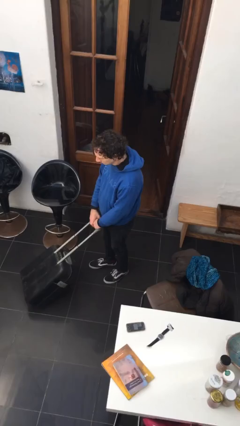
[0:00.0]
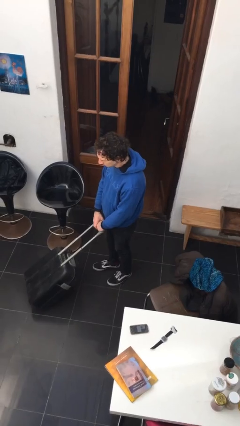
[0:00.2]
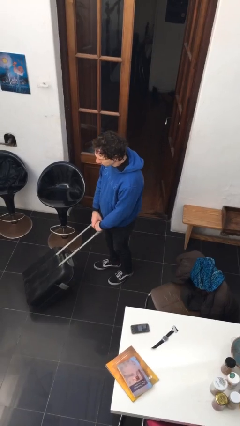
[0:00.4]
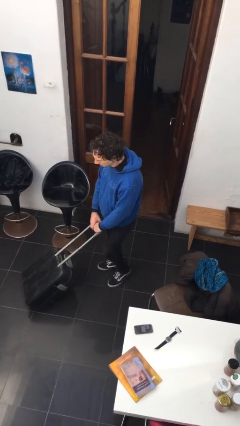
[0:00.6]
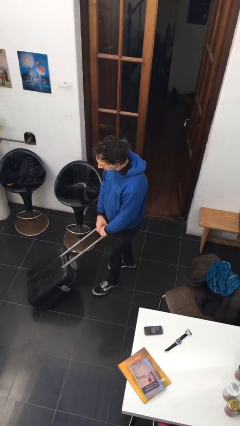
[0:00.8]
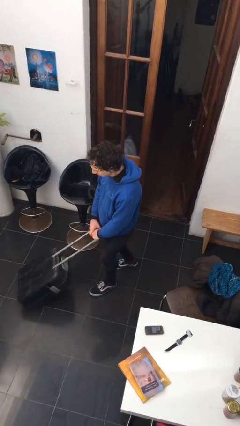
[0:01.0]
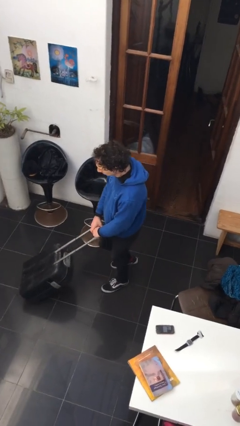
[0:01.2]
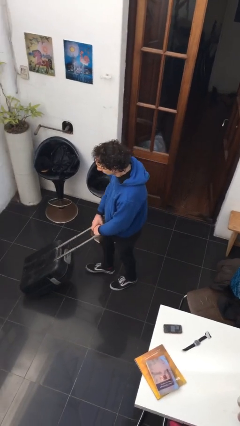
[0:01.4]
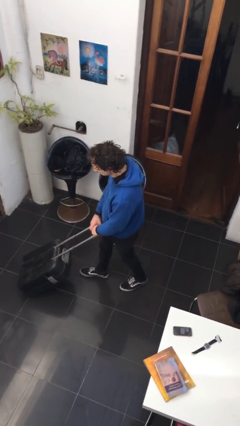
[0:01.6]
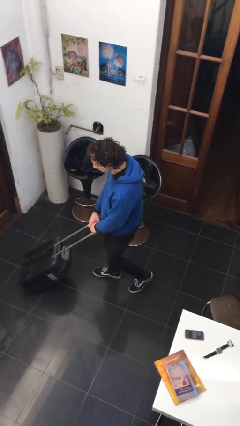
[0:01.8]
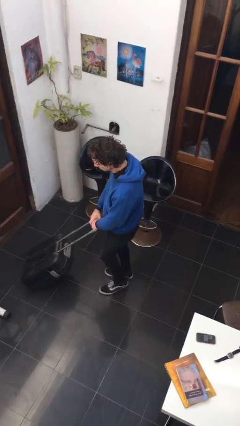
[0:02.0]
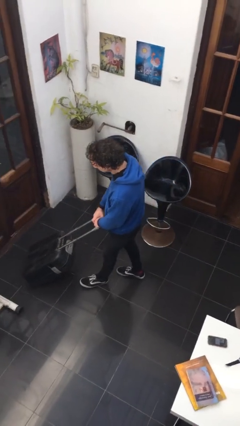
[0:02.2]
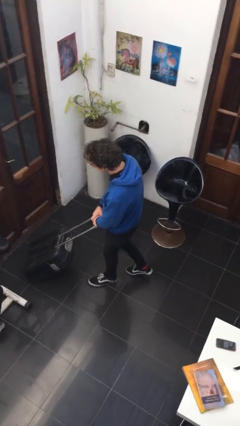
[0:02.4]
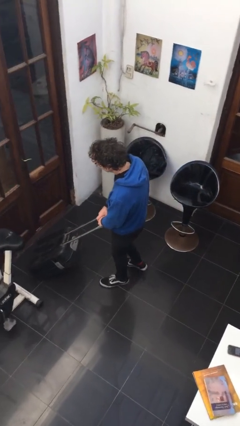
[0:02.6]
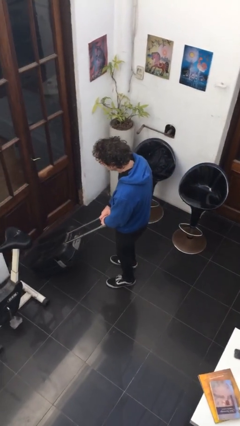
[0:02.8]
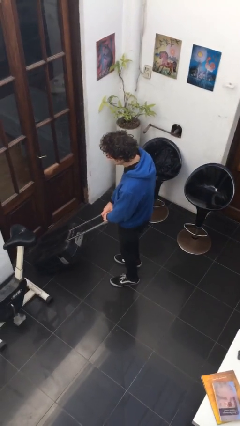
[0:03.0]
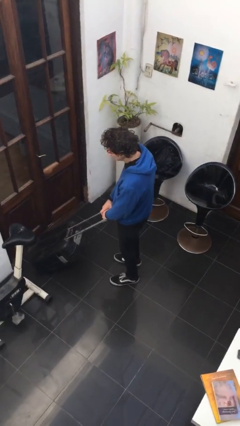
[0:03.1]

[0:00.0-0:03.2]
person pushes wheeled cart

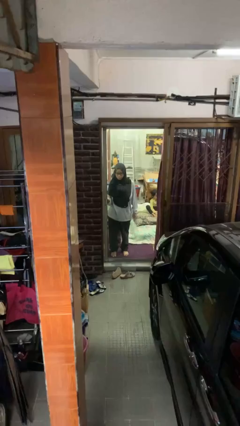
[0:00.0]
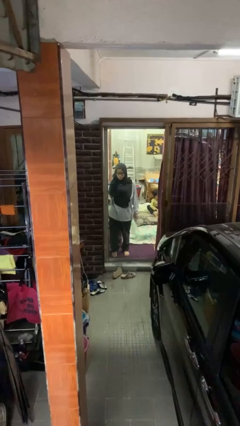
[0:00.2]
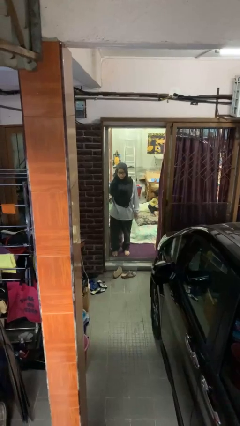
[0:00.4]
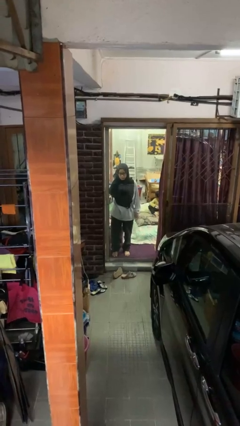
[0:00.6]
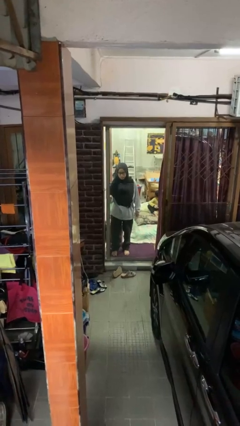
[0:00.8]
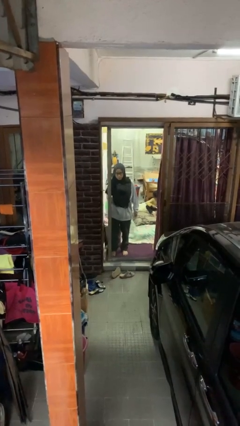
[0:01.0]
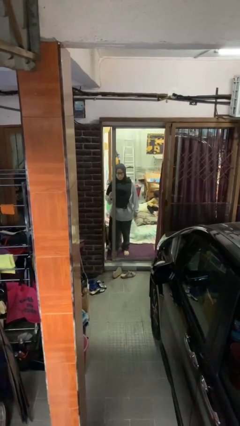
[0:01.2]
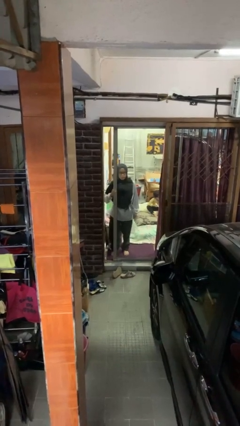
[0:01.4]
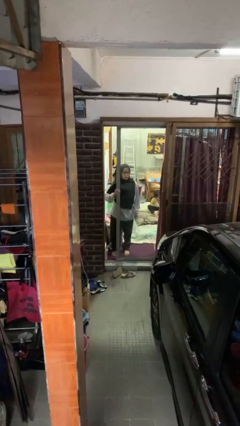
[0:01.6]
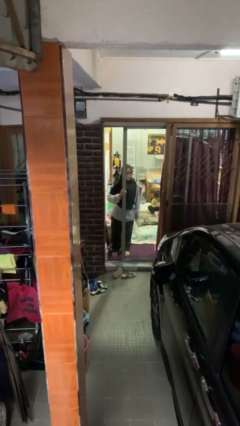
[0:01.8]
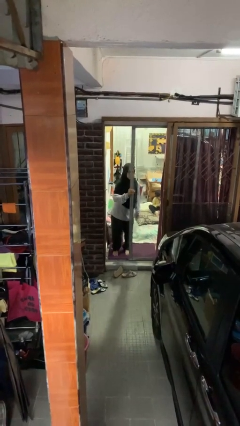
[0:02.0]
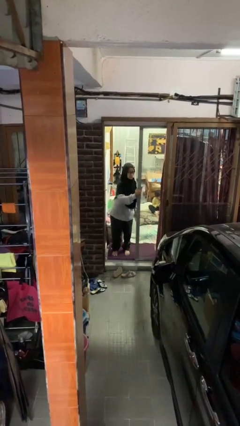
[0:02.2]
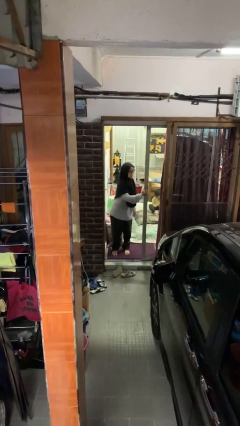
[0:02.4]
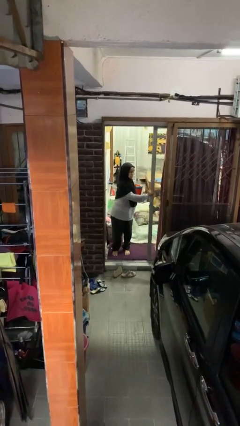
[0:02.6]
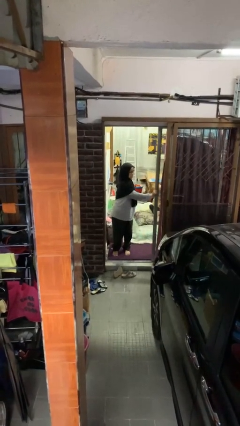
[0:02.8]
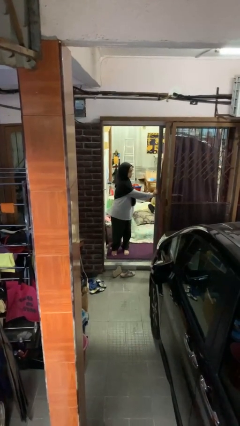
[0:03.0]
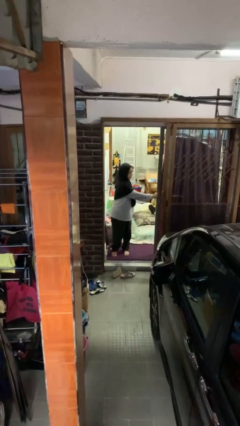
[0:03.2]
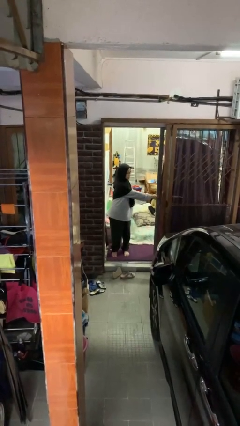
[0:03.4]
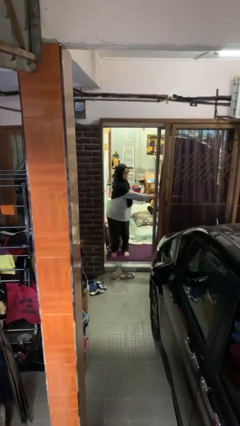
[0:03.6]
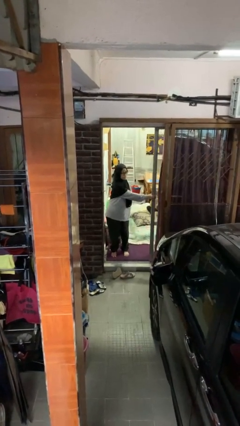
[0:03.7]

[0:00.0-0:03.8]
person opens sliding door

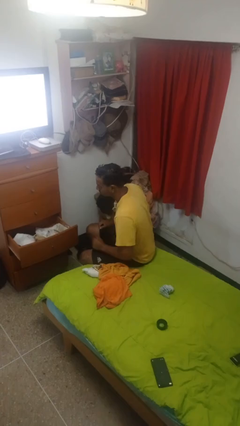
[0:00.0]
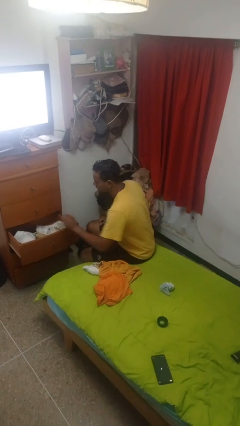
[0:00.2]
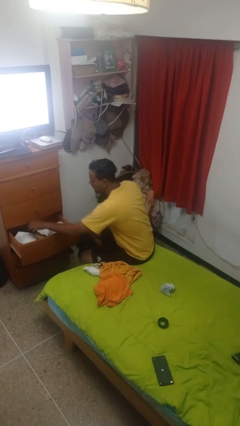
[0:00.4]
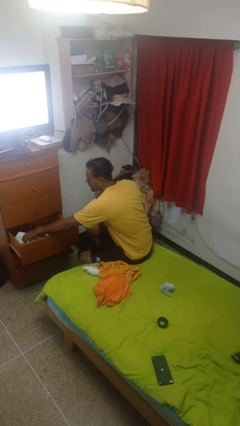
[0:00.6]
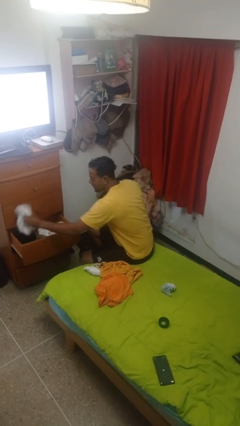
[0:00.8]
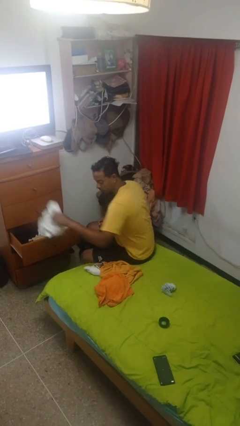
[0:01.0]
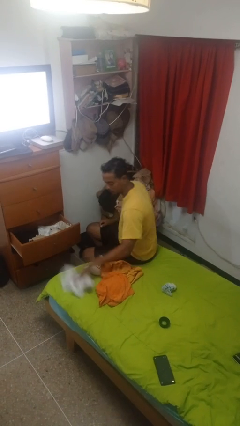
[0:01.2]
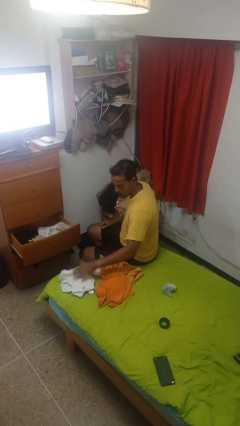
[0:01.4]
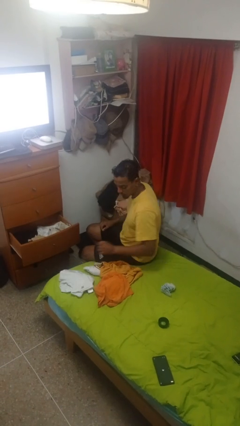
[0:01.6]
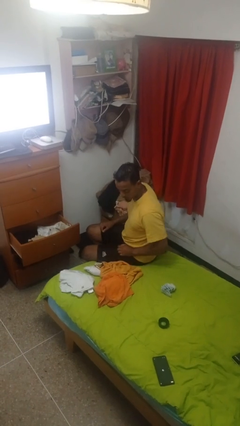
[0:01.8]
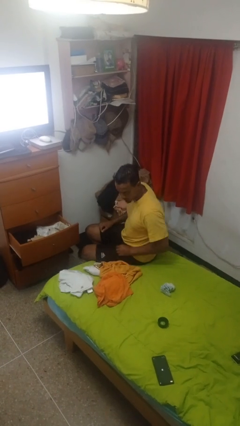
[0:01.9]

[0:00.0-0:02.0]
person takes clothes from dresser

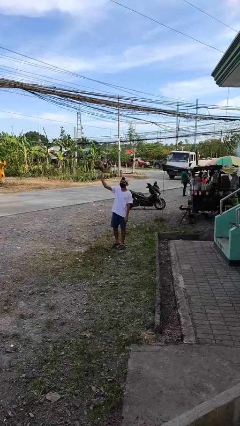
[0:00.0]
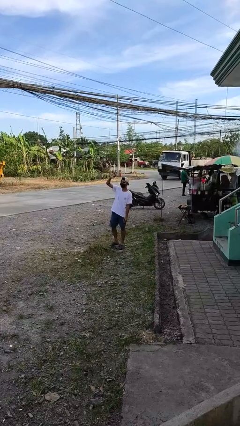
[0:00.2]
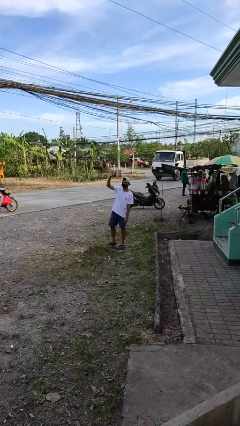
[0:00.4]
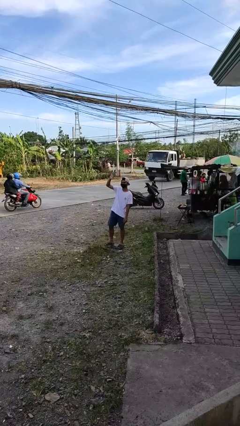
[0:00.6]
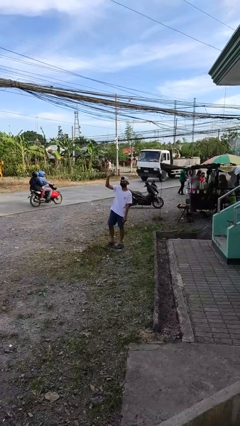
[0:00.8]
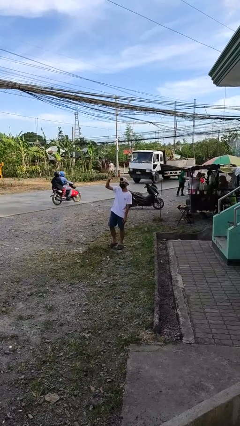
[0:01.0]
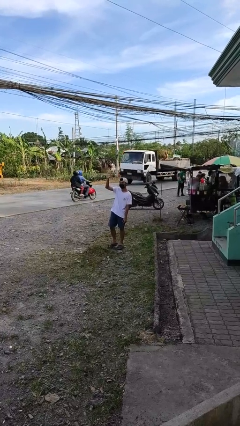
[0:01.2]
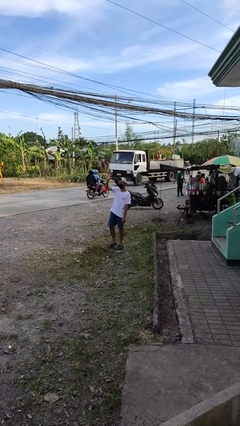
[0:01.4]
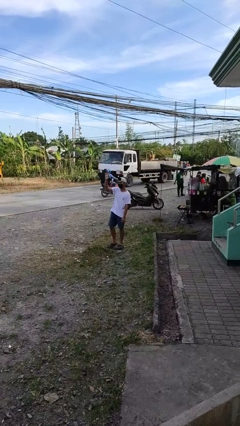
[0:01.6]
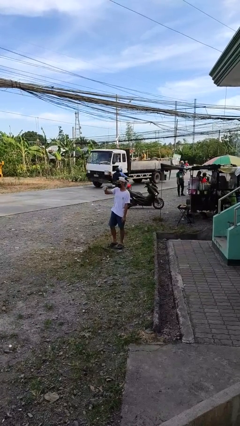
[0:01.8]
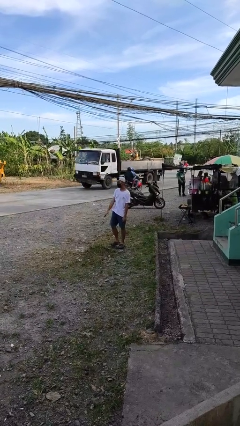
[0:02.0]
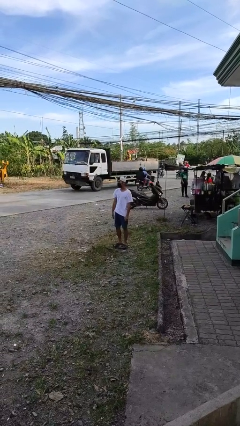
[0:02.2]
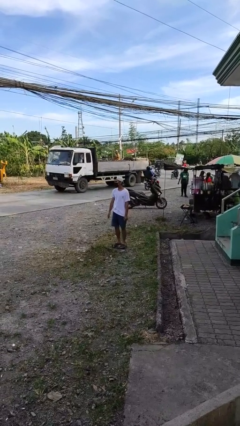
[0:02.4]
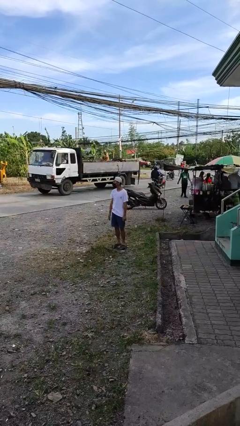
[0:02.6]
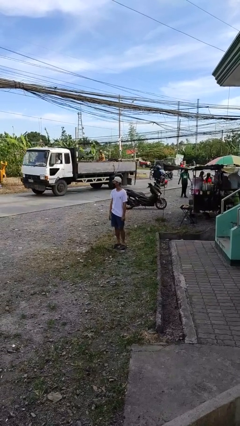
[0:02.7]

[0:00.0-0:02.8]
person waves at person

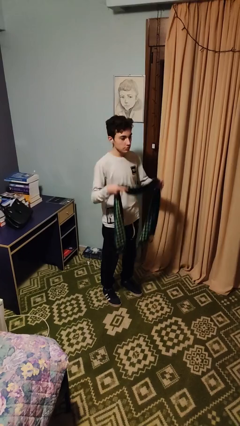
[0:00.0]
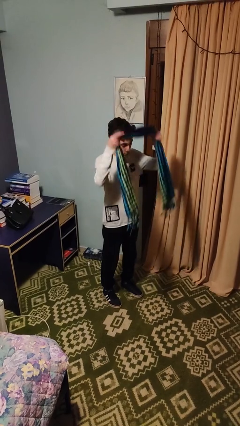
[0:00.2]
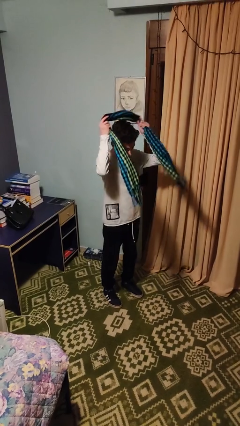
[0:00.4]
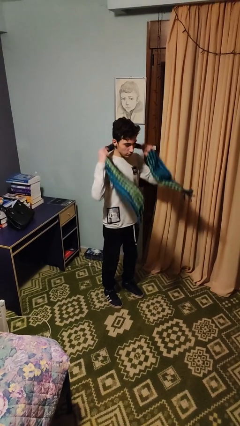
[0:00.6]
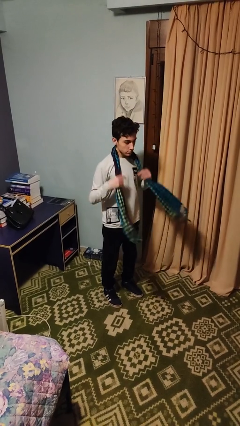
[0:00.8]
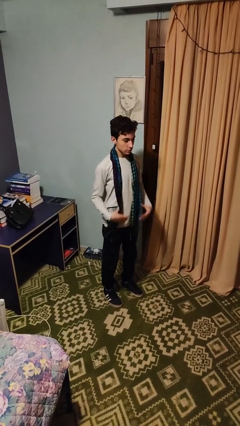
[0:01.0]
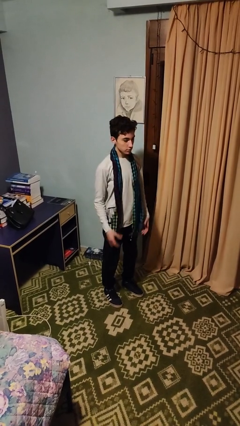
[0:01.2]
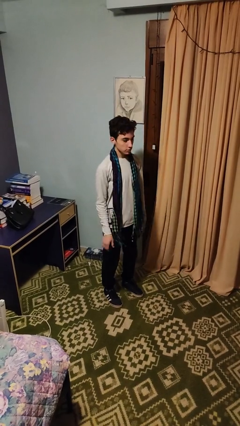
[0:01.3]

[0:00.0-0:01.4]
person puts on scarf

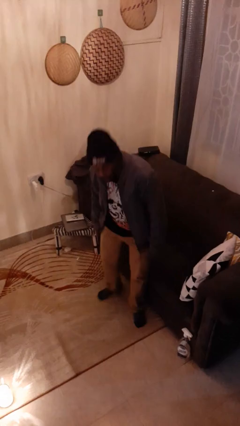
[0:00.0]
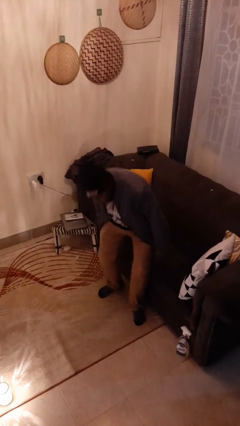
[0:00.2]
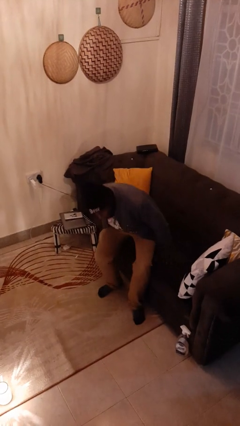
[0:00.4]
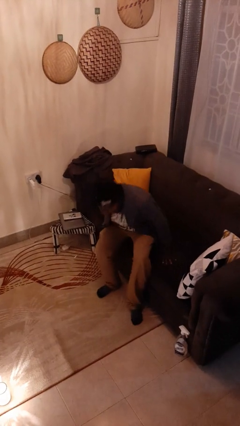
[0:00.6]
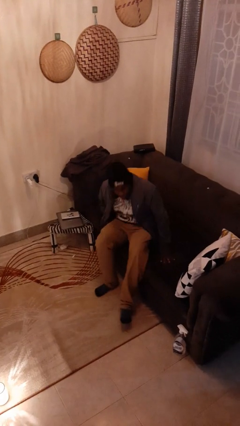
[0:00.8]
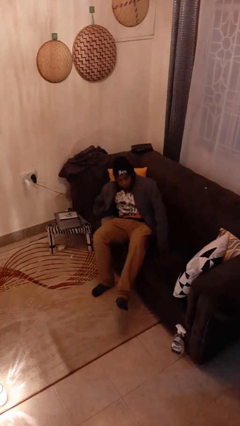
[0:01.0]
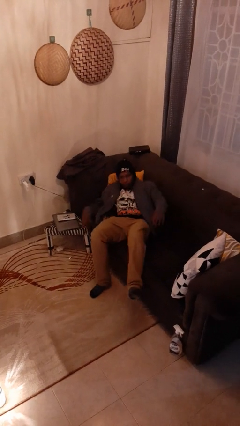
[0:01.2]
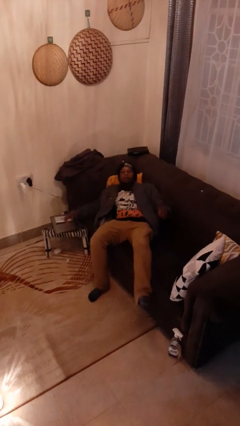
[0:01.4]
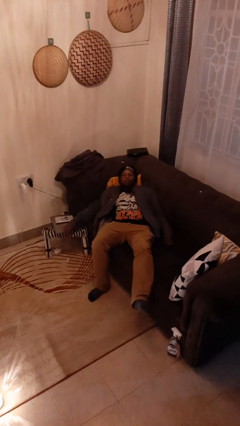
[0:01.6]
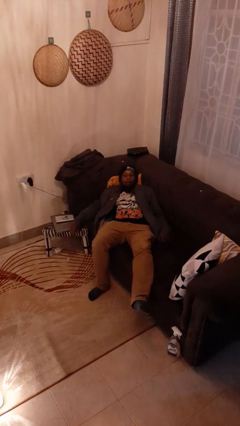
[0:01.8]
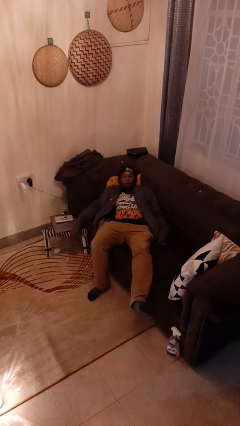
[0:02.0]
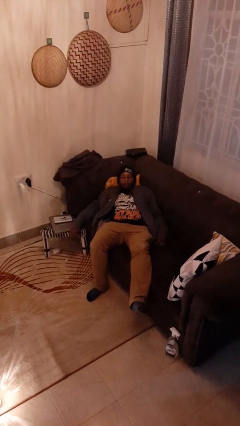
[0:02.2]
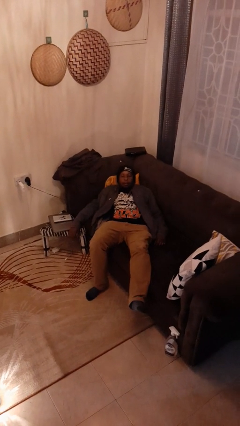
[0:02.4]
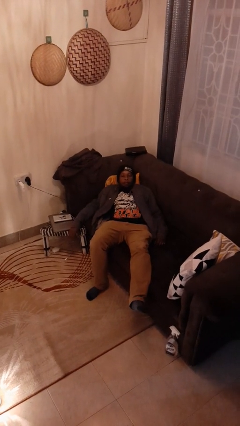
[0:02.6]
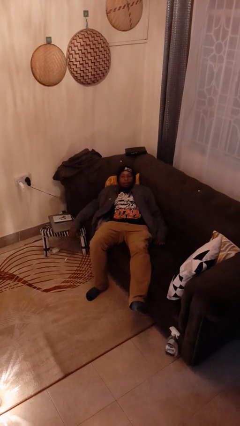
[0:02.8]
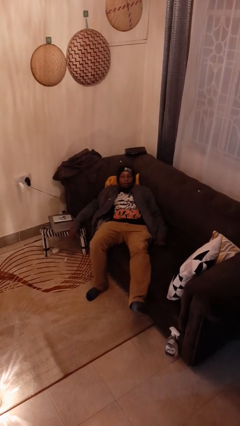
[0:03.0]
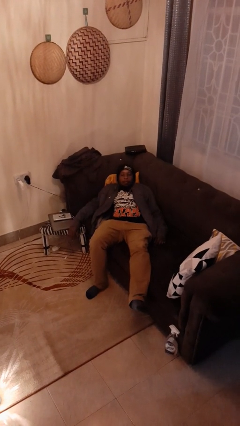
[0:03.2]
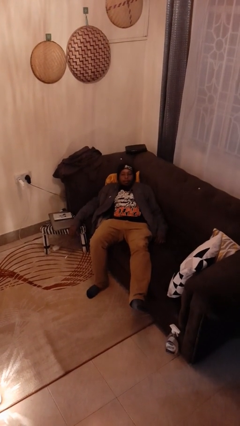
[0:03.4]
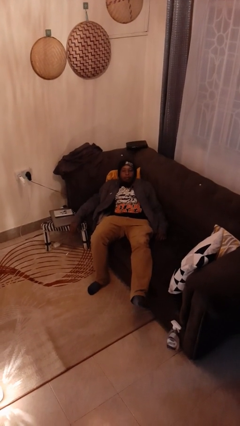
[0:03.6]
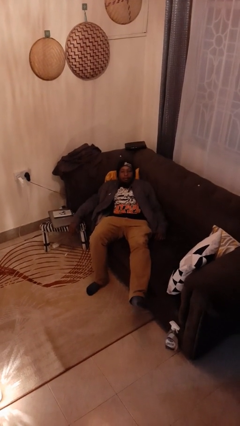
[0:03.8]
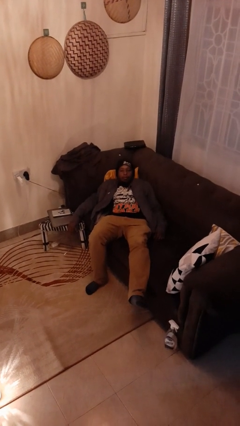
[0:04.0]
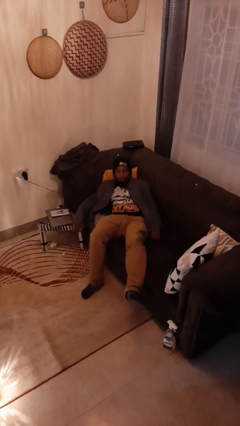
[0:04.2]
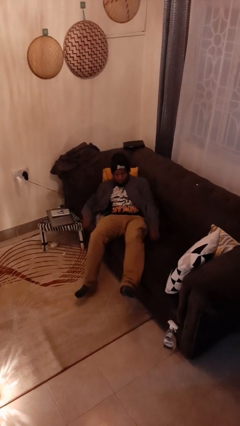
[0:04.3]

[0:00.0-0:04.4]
person lies down on couch
